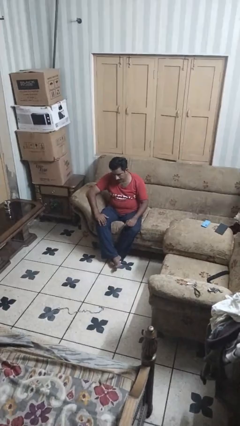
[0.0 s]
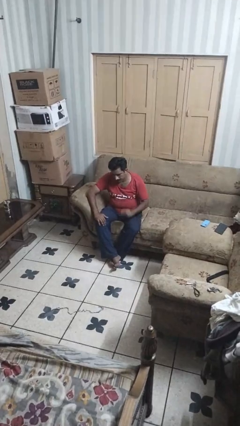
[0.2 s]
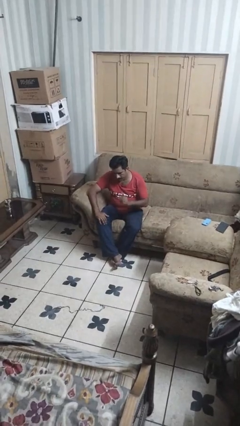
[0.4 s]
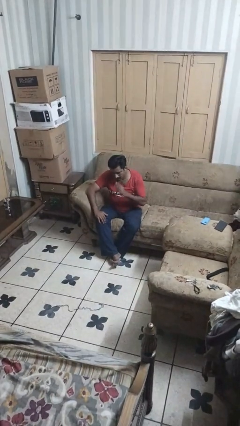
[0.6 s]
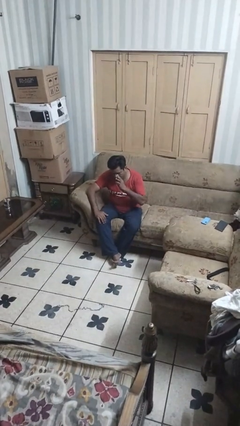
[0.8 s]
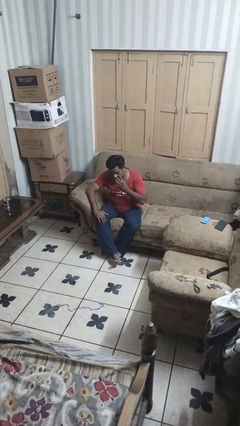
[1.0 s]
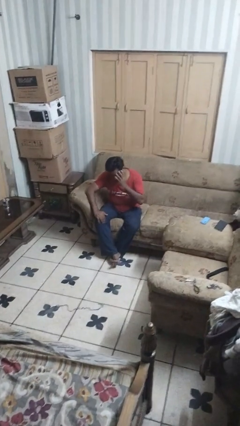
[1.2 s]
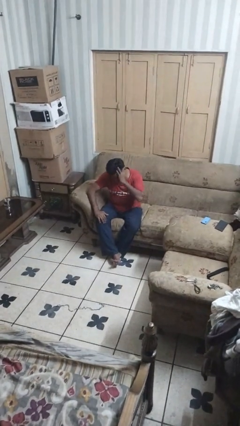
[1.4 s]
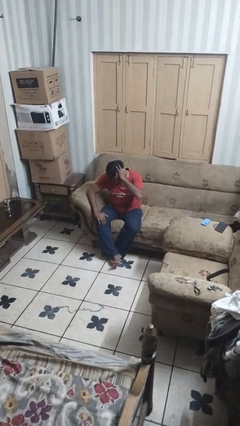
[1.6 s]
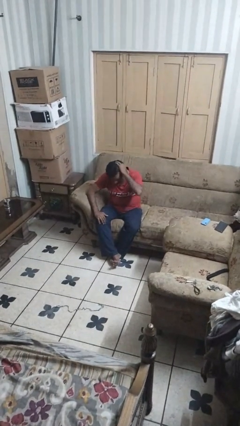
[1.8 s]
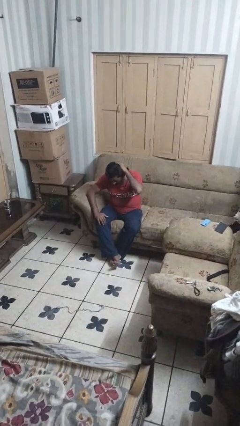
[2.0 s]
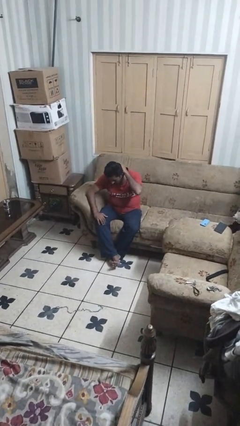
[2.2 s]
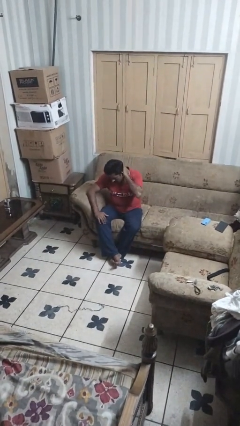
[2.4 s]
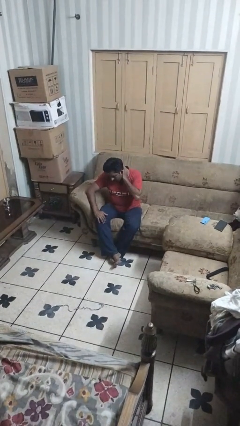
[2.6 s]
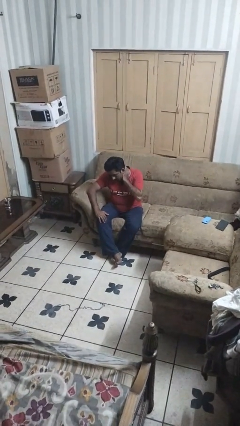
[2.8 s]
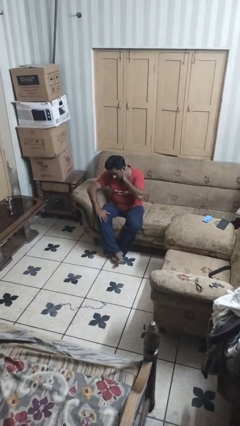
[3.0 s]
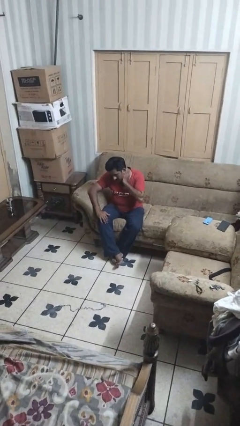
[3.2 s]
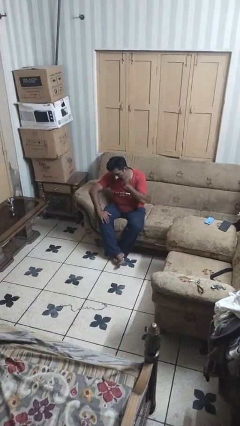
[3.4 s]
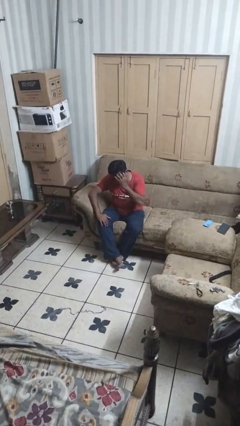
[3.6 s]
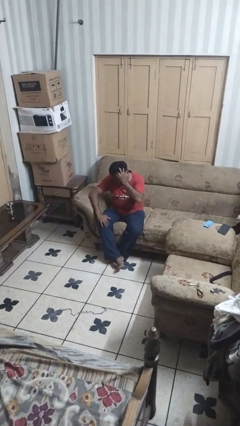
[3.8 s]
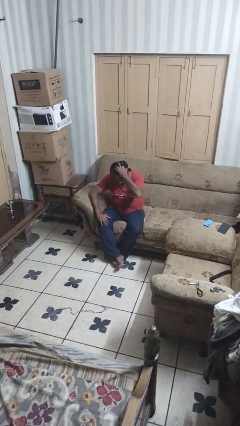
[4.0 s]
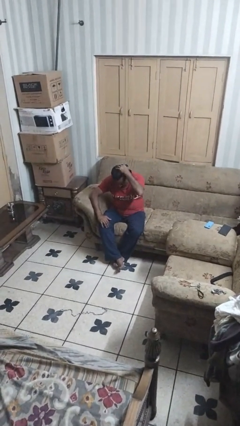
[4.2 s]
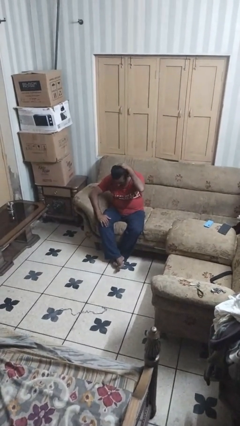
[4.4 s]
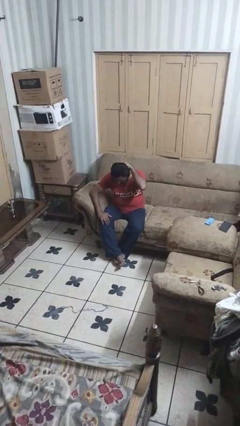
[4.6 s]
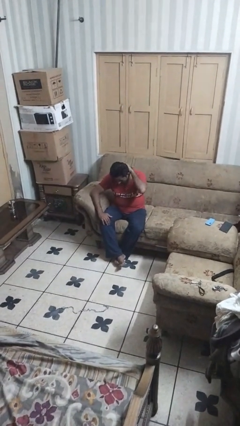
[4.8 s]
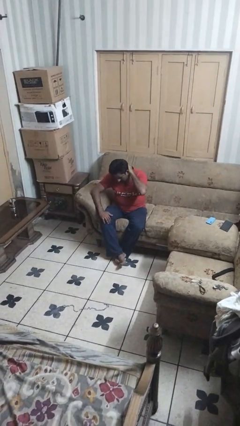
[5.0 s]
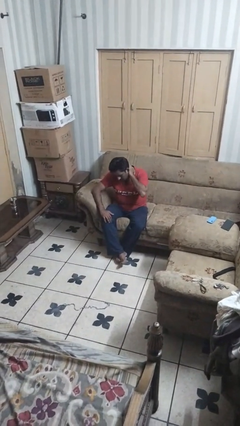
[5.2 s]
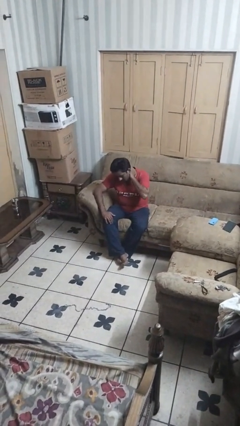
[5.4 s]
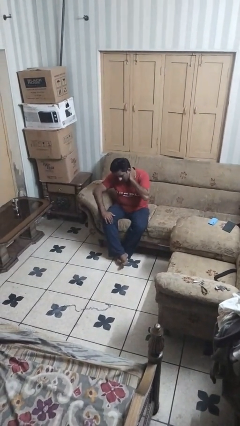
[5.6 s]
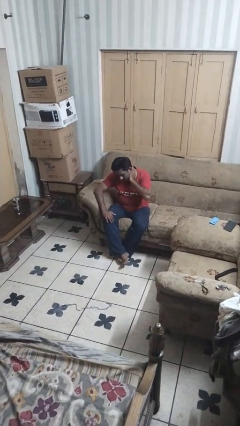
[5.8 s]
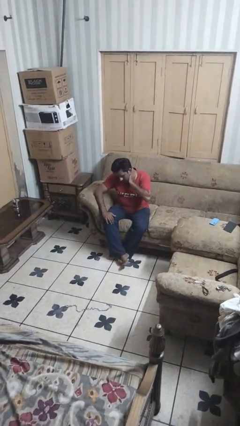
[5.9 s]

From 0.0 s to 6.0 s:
person strokes hair

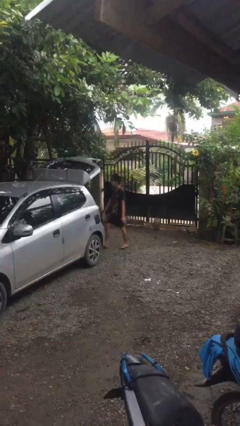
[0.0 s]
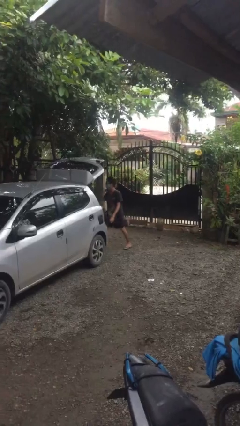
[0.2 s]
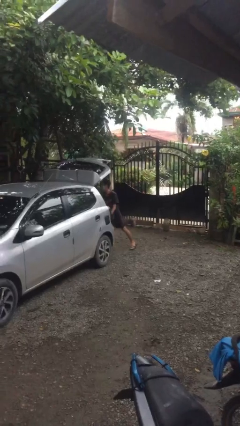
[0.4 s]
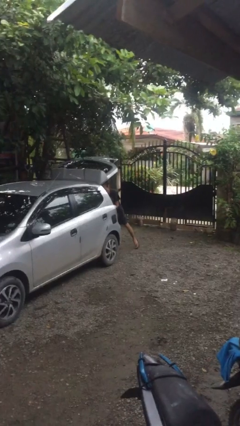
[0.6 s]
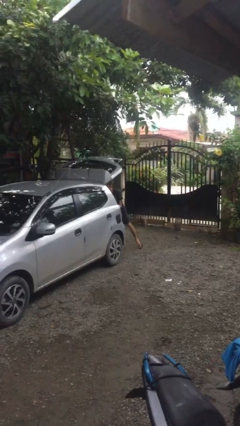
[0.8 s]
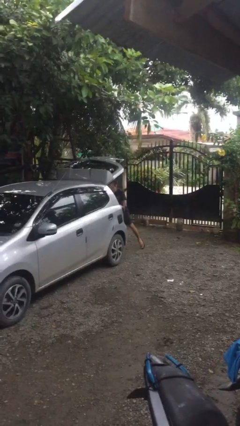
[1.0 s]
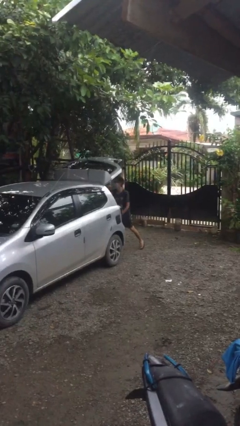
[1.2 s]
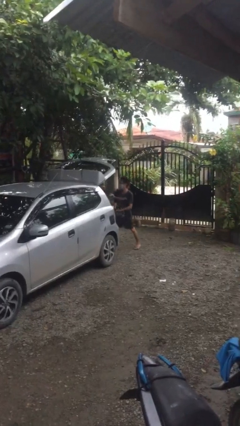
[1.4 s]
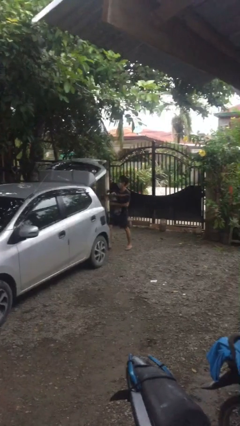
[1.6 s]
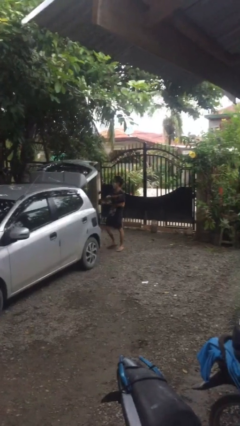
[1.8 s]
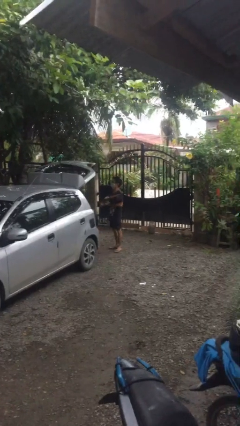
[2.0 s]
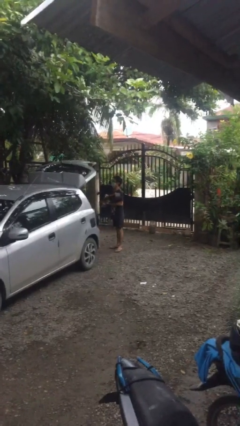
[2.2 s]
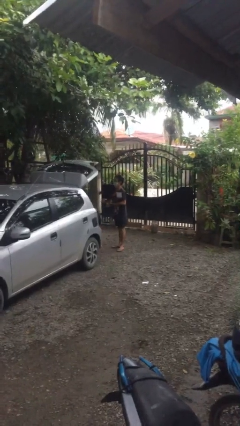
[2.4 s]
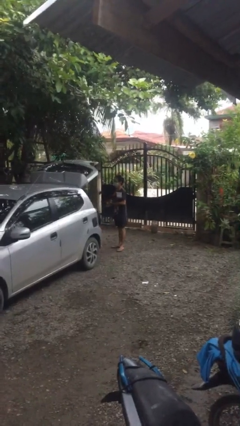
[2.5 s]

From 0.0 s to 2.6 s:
person unloads car

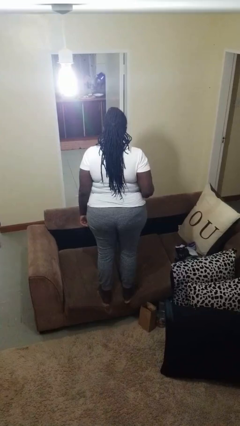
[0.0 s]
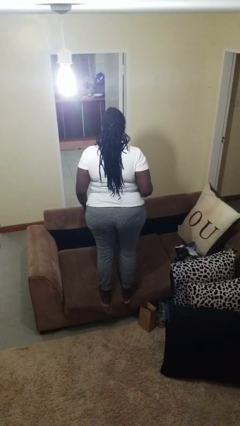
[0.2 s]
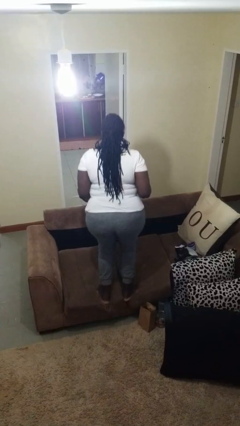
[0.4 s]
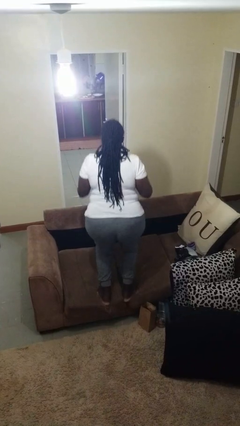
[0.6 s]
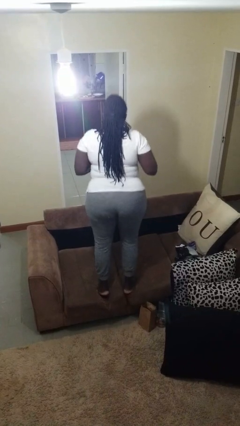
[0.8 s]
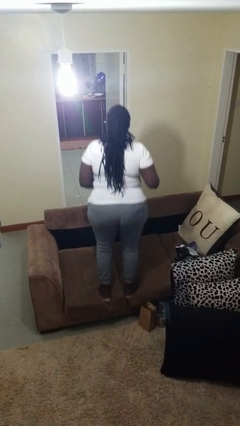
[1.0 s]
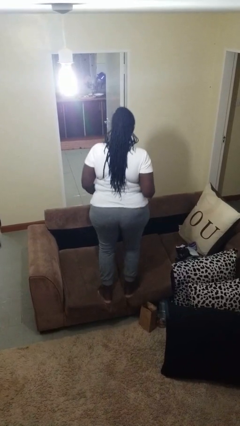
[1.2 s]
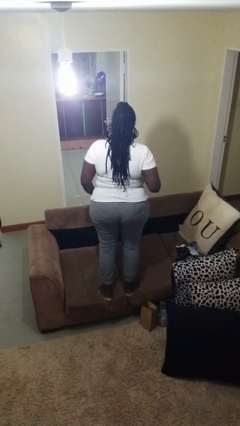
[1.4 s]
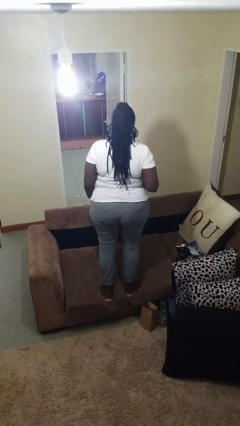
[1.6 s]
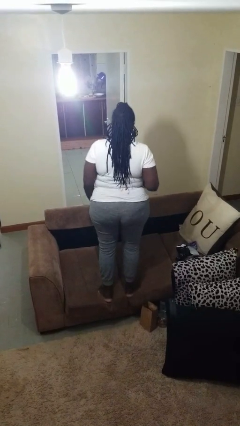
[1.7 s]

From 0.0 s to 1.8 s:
person jumps on couch

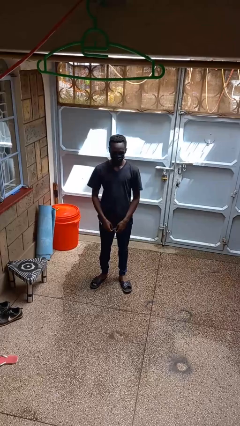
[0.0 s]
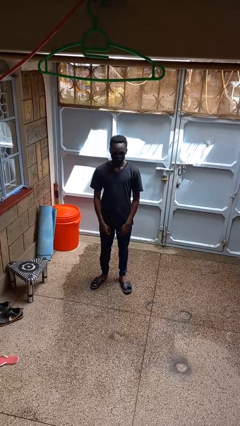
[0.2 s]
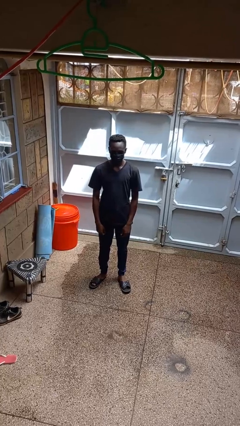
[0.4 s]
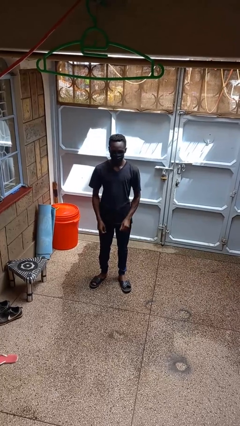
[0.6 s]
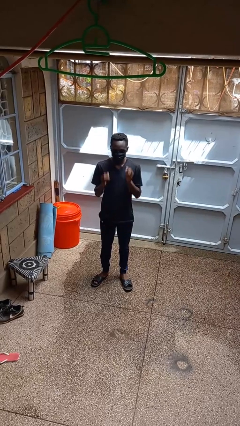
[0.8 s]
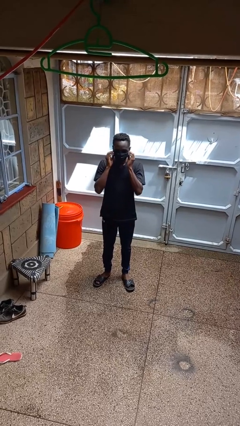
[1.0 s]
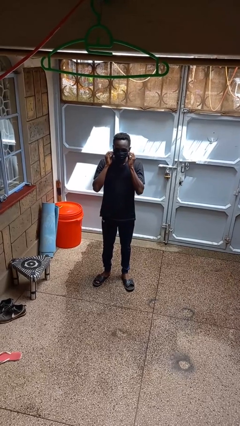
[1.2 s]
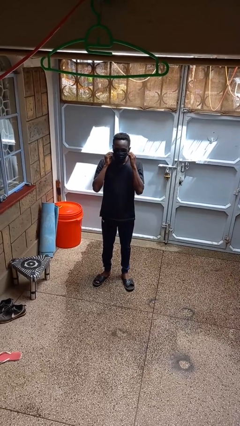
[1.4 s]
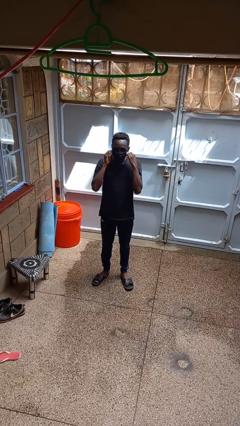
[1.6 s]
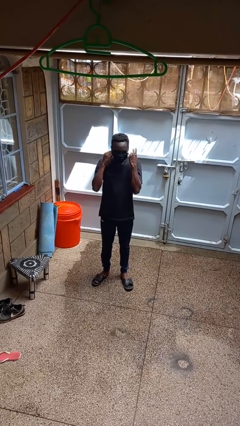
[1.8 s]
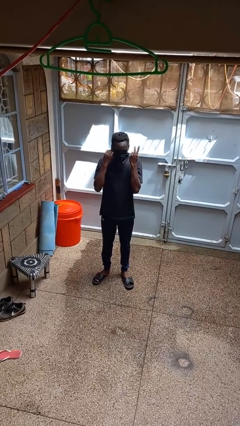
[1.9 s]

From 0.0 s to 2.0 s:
person takes off facemask

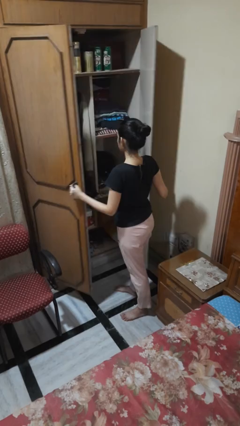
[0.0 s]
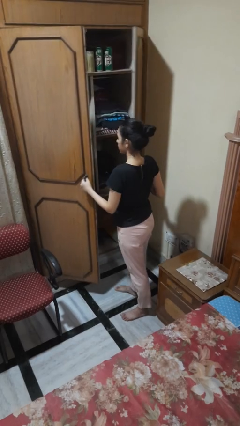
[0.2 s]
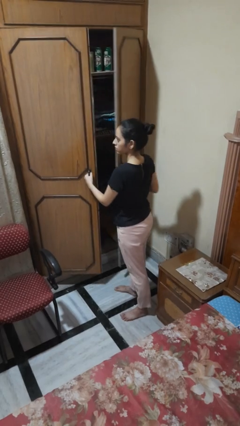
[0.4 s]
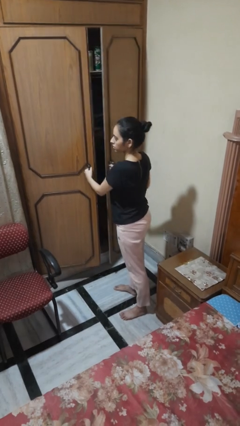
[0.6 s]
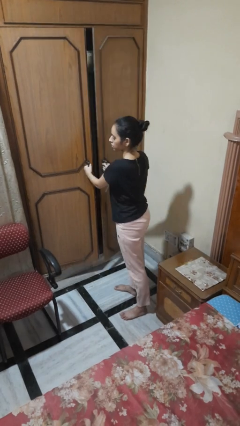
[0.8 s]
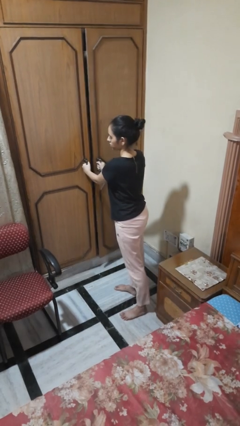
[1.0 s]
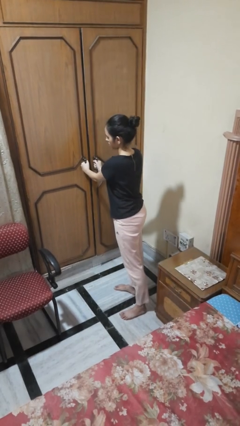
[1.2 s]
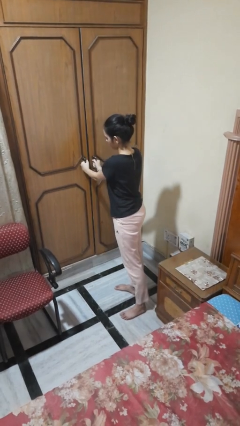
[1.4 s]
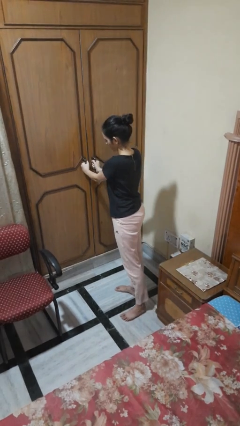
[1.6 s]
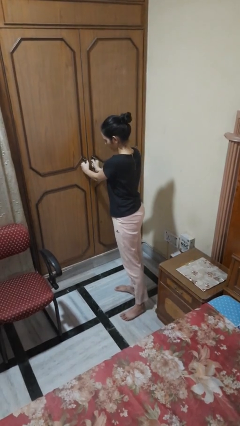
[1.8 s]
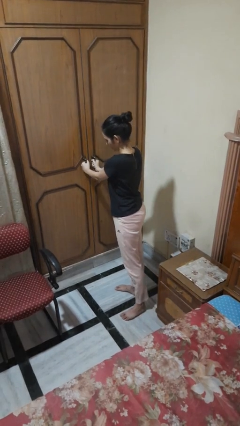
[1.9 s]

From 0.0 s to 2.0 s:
person closes closet door

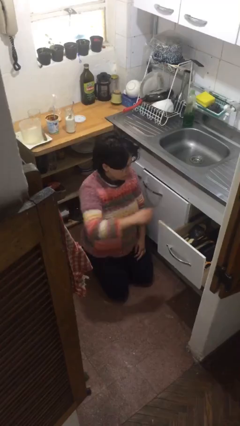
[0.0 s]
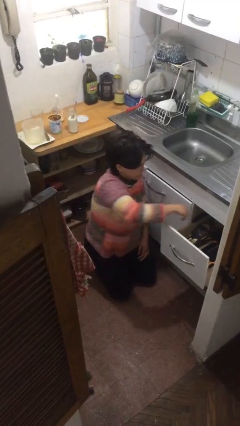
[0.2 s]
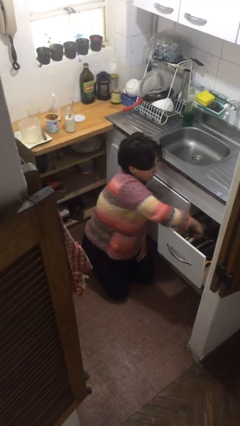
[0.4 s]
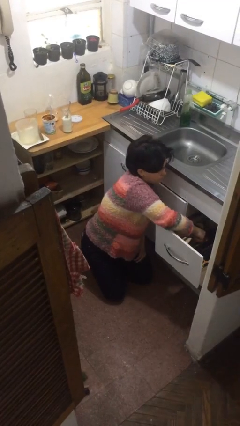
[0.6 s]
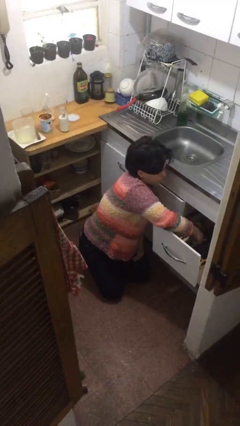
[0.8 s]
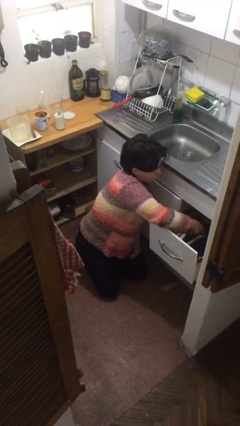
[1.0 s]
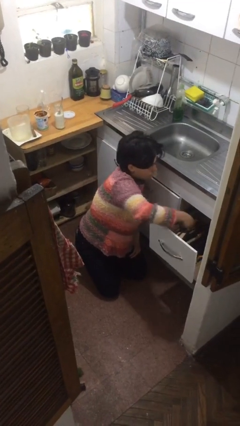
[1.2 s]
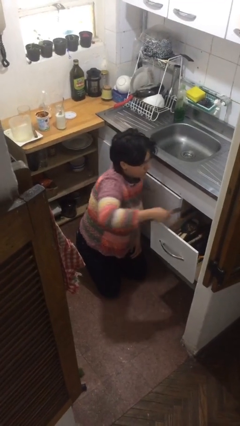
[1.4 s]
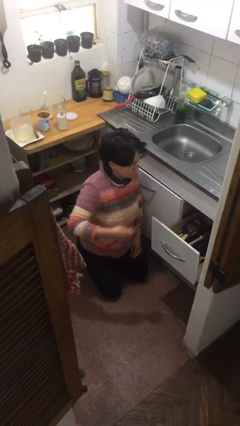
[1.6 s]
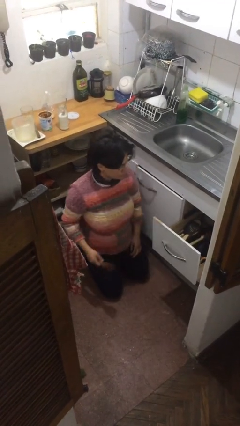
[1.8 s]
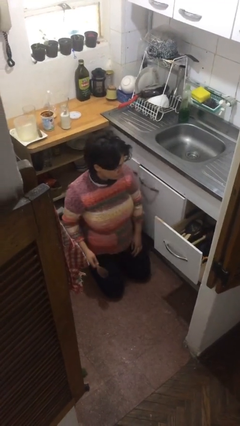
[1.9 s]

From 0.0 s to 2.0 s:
person takes object from kitchen drawer

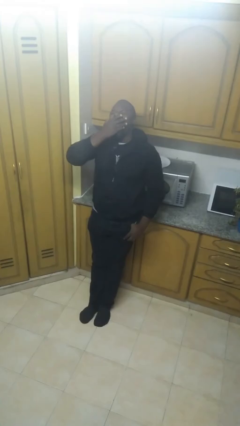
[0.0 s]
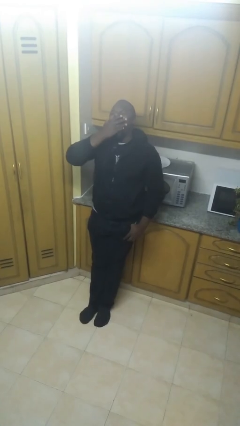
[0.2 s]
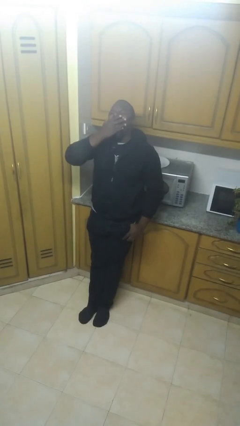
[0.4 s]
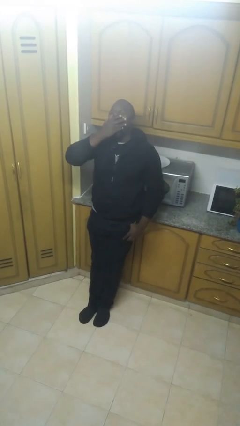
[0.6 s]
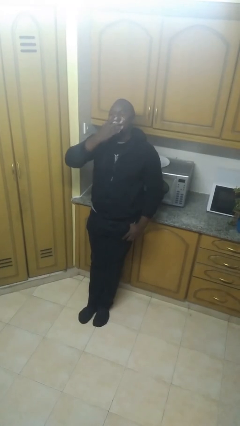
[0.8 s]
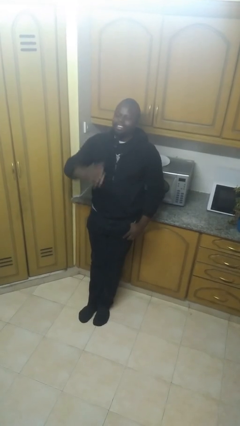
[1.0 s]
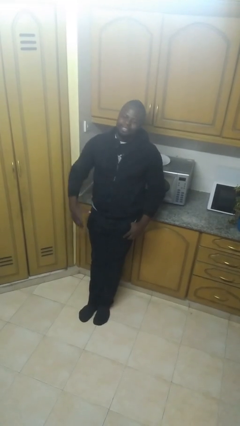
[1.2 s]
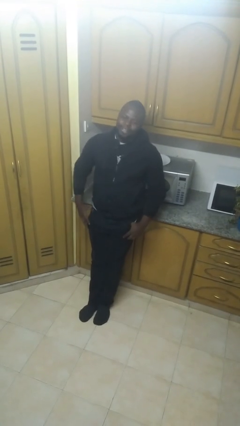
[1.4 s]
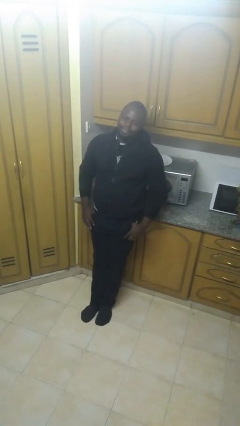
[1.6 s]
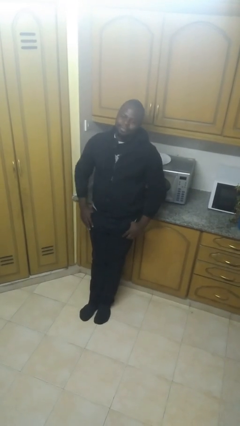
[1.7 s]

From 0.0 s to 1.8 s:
person yawns
